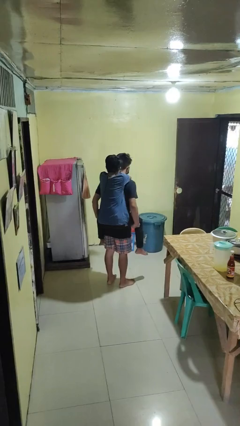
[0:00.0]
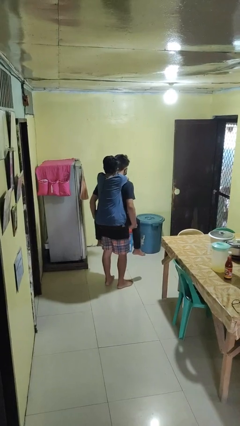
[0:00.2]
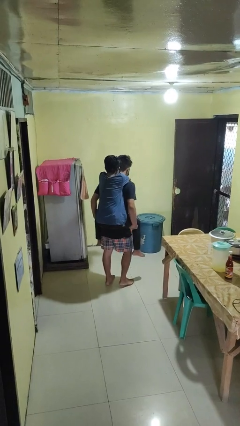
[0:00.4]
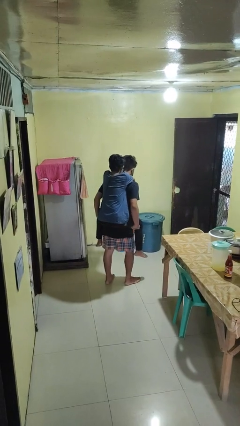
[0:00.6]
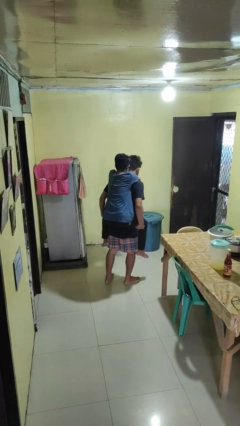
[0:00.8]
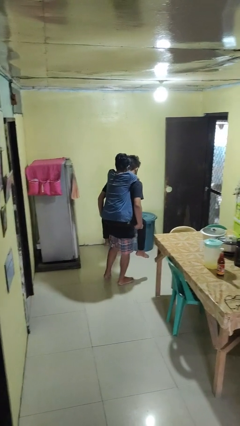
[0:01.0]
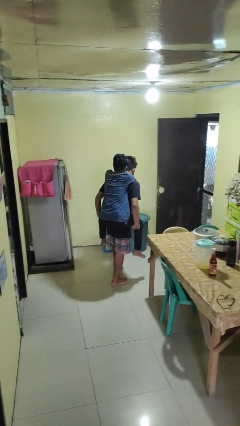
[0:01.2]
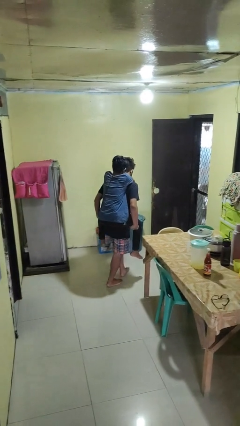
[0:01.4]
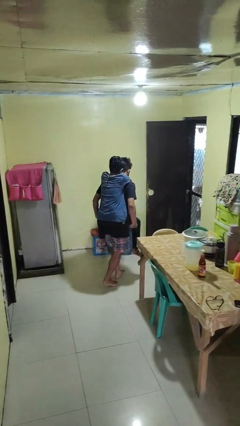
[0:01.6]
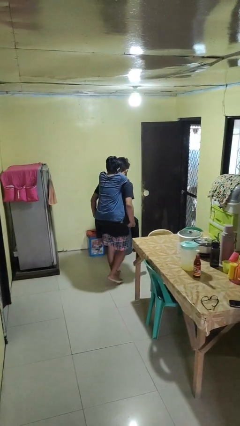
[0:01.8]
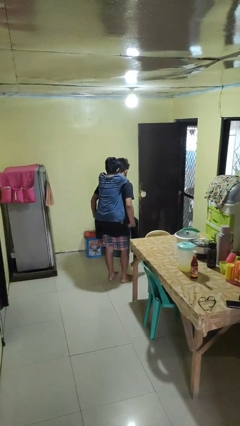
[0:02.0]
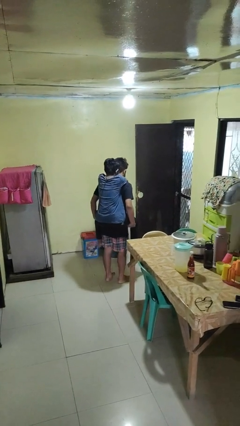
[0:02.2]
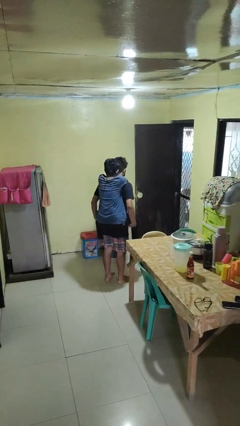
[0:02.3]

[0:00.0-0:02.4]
person carries person on back

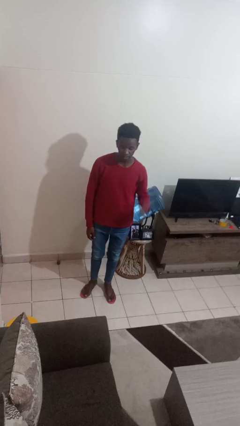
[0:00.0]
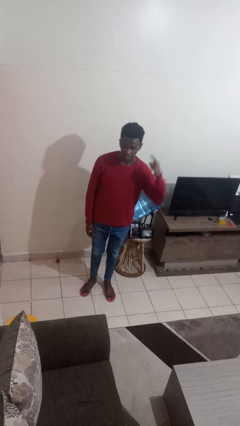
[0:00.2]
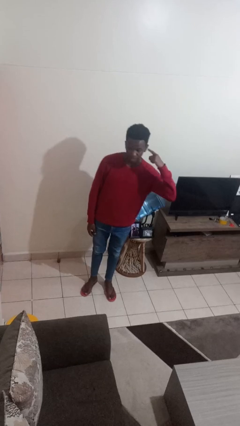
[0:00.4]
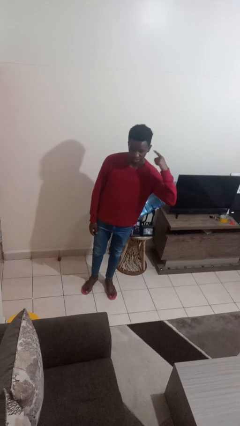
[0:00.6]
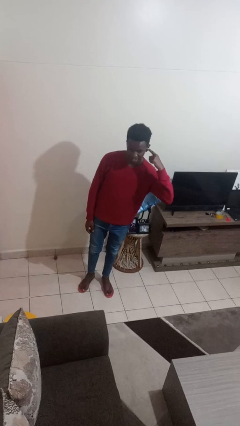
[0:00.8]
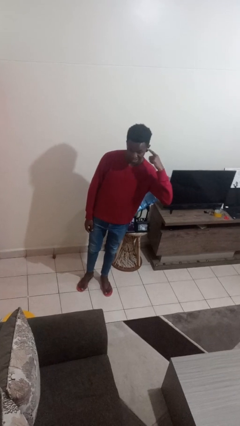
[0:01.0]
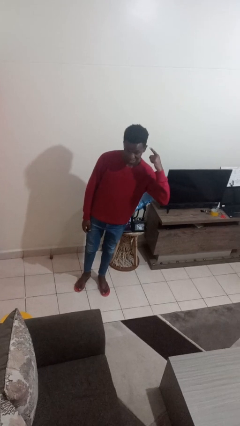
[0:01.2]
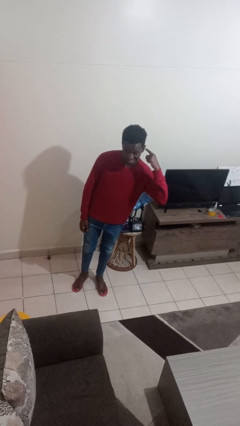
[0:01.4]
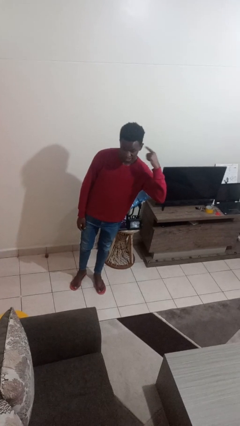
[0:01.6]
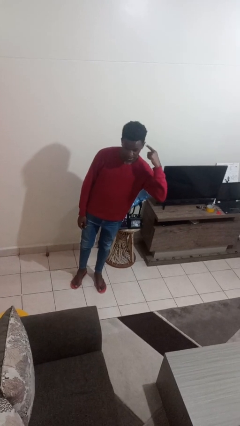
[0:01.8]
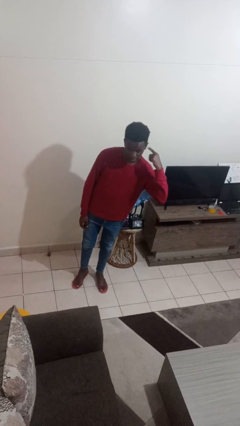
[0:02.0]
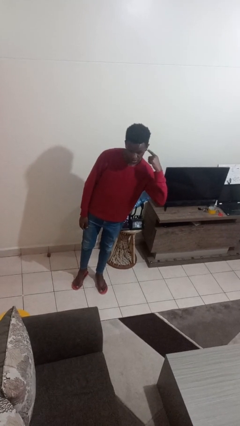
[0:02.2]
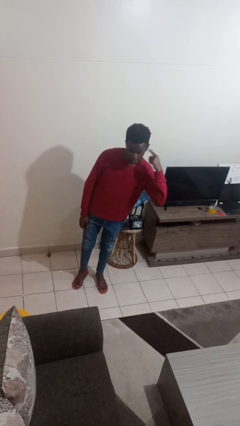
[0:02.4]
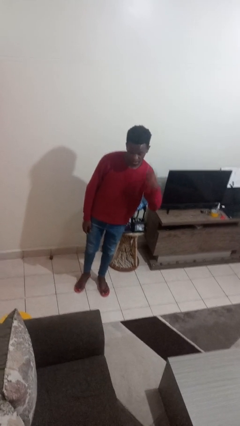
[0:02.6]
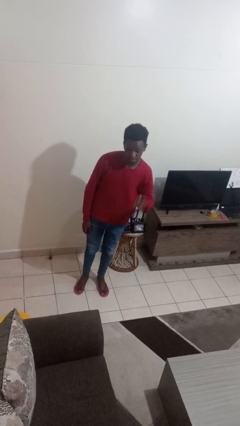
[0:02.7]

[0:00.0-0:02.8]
person gestures listen closely

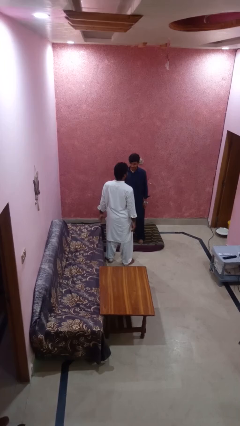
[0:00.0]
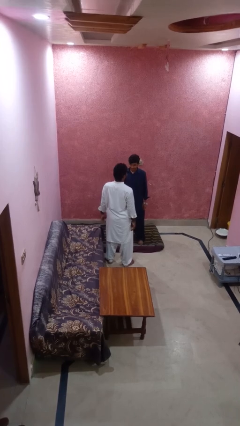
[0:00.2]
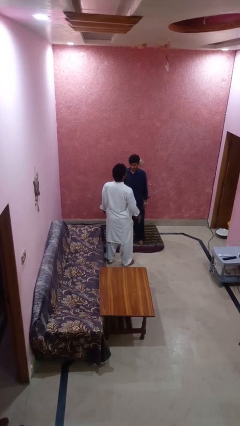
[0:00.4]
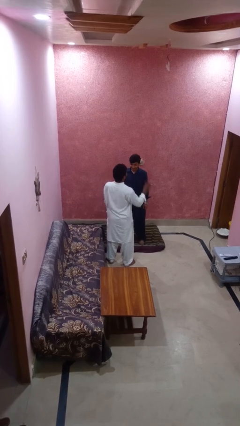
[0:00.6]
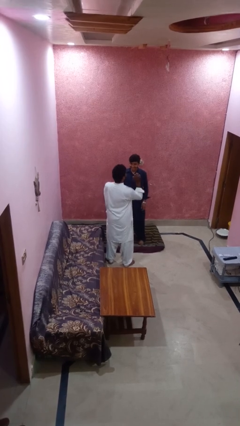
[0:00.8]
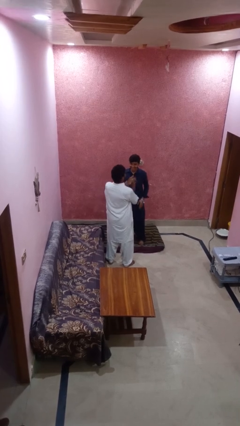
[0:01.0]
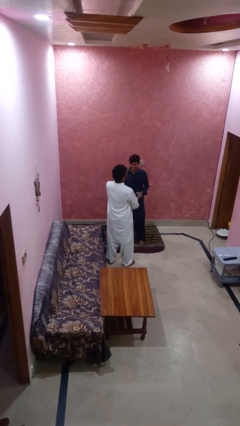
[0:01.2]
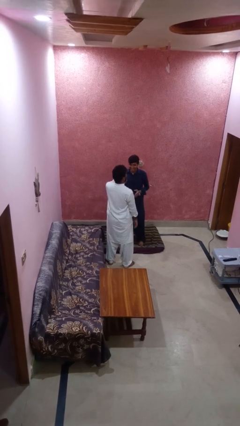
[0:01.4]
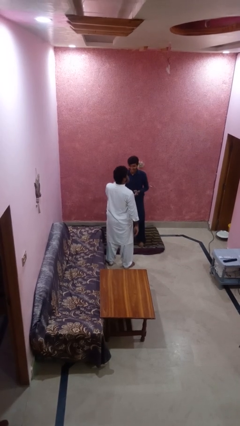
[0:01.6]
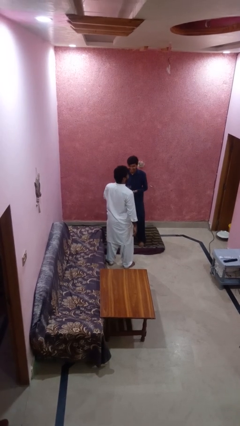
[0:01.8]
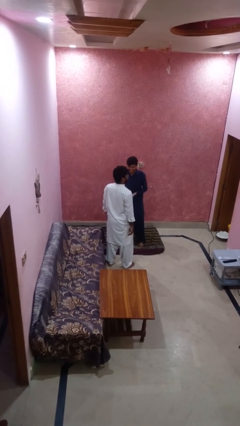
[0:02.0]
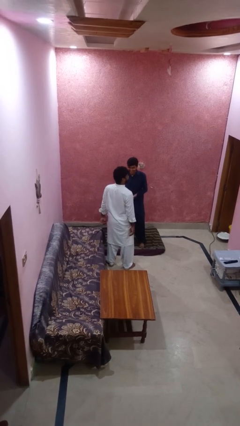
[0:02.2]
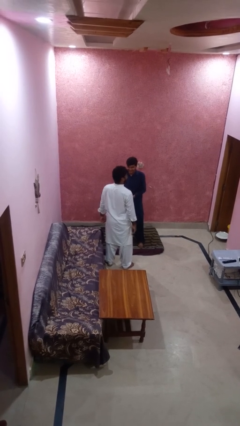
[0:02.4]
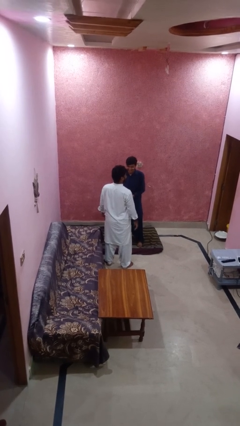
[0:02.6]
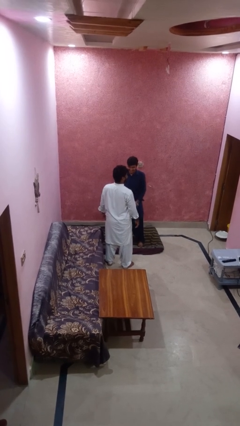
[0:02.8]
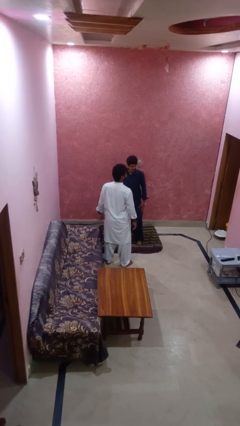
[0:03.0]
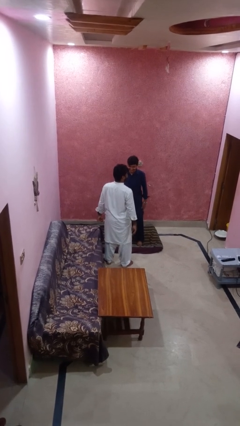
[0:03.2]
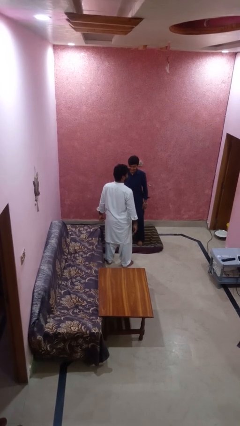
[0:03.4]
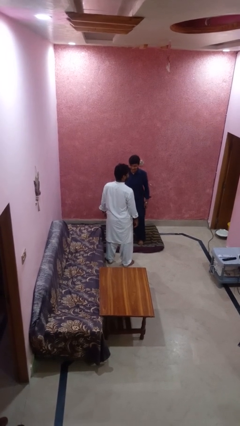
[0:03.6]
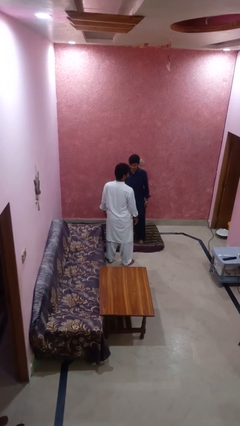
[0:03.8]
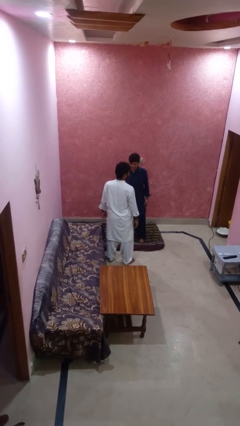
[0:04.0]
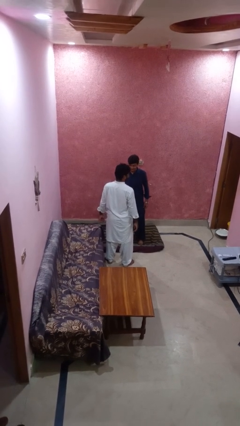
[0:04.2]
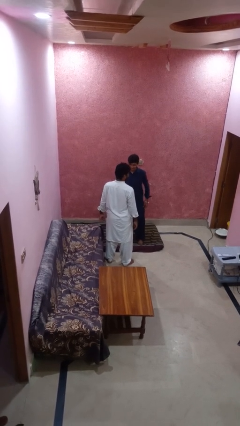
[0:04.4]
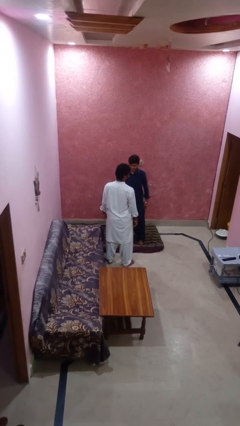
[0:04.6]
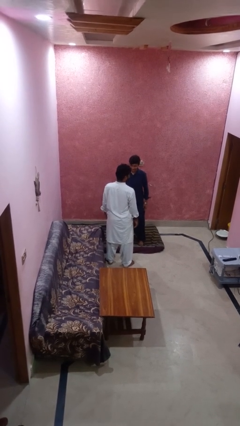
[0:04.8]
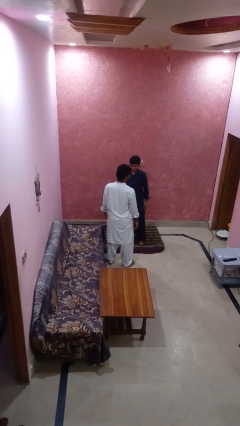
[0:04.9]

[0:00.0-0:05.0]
person laughs with person

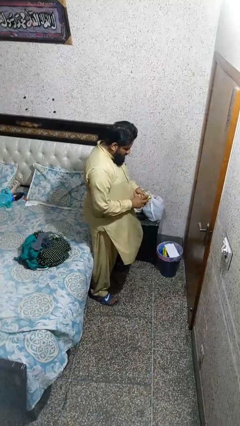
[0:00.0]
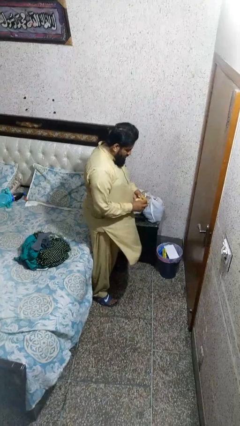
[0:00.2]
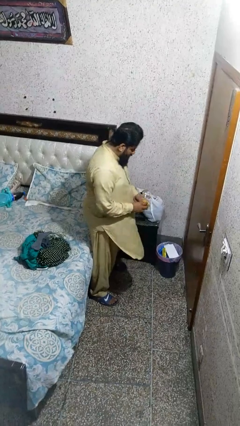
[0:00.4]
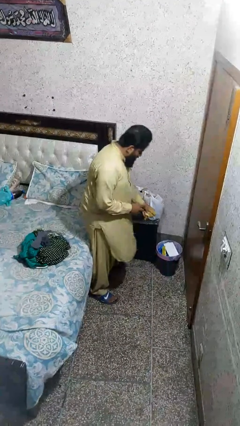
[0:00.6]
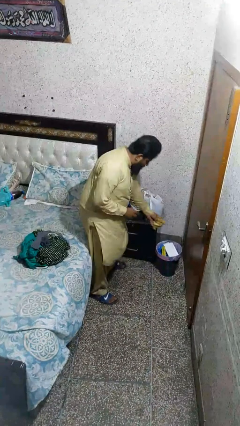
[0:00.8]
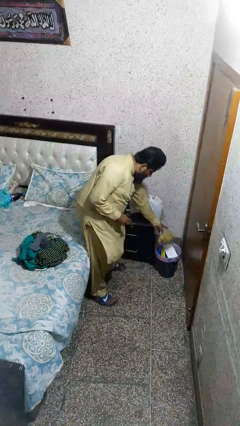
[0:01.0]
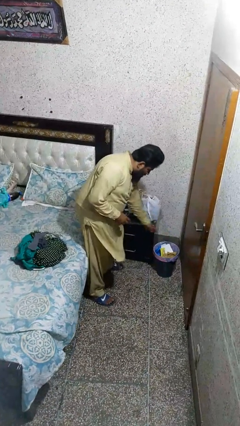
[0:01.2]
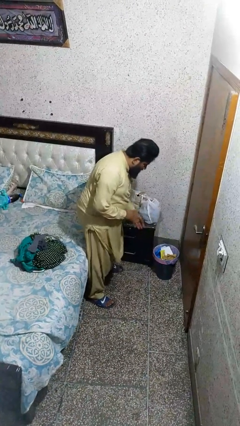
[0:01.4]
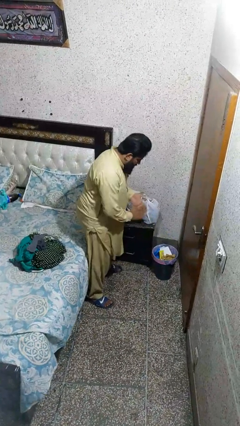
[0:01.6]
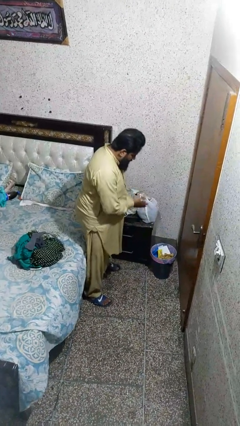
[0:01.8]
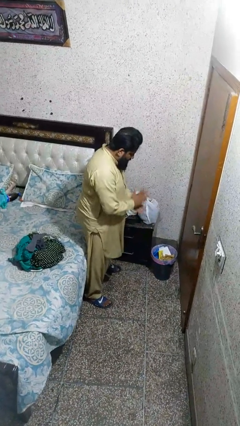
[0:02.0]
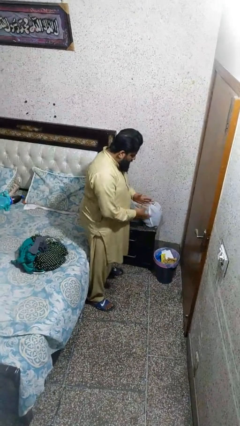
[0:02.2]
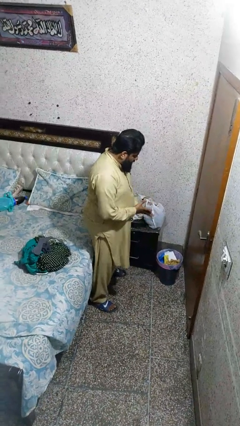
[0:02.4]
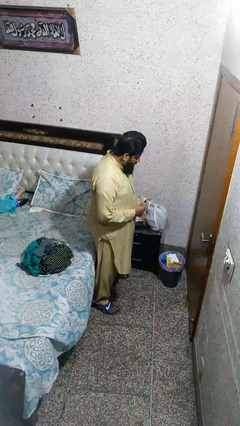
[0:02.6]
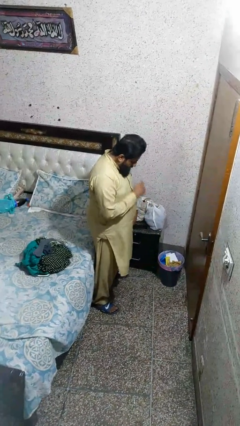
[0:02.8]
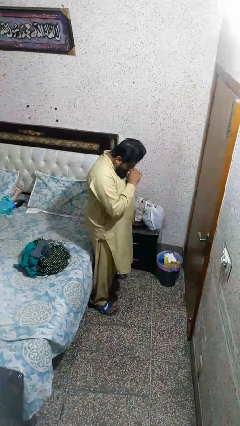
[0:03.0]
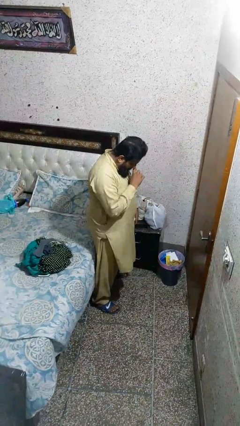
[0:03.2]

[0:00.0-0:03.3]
person discards trash

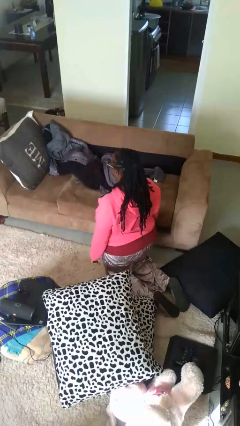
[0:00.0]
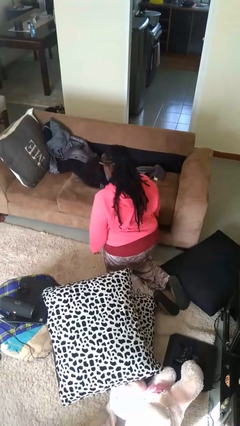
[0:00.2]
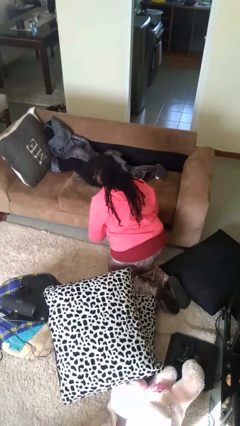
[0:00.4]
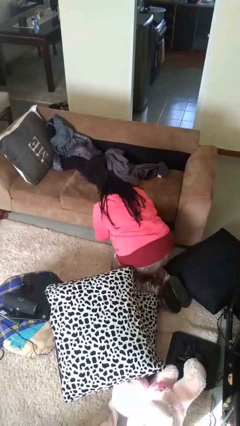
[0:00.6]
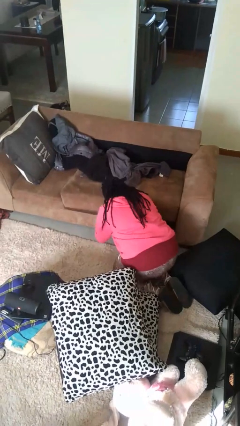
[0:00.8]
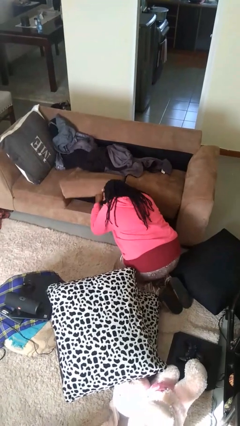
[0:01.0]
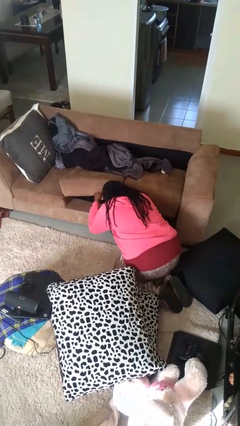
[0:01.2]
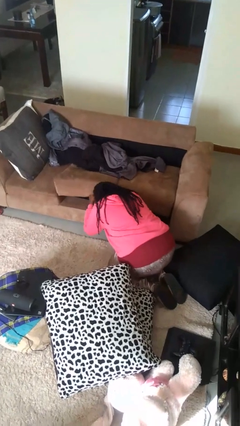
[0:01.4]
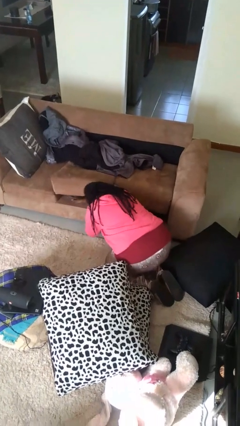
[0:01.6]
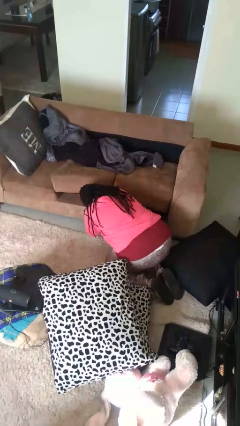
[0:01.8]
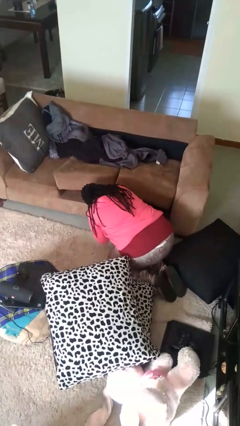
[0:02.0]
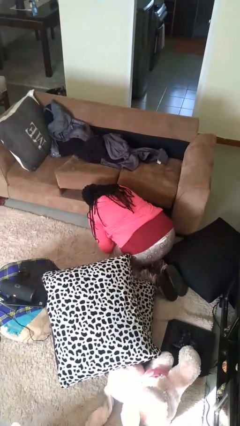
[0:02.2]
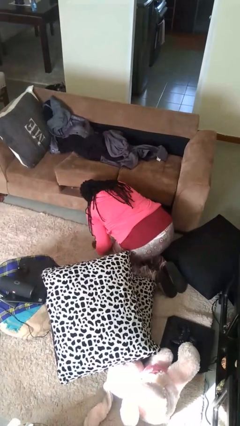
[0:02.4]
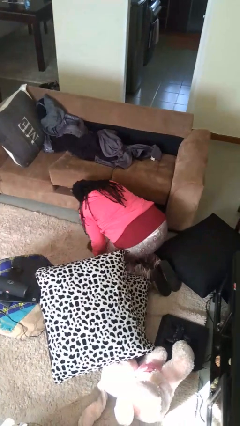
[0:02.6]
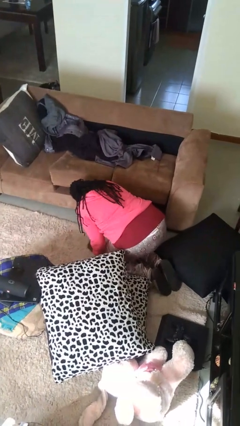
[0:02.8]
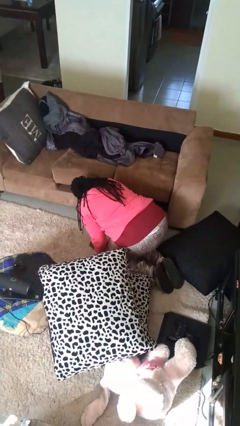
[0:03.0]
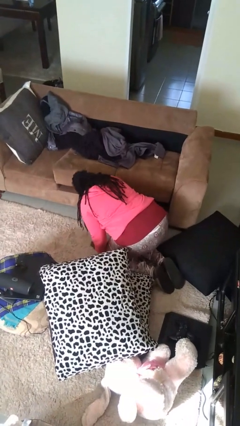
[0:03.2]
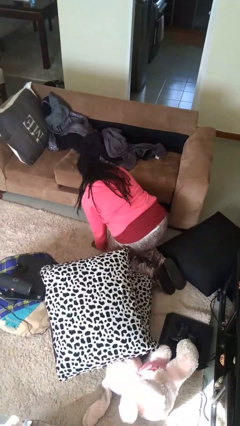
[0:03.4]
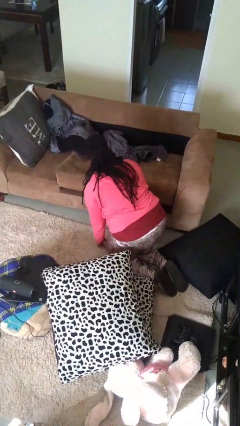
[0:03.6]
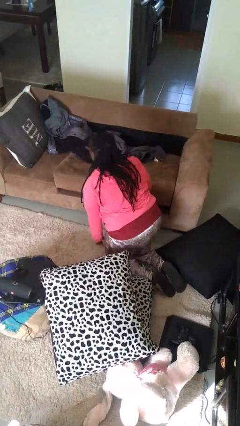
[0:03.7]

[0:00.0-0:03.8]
person searches under couch
